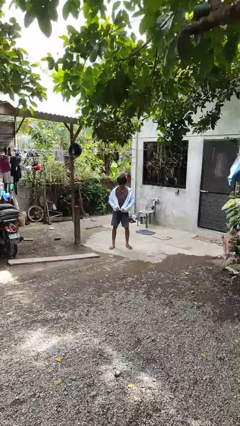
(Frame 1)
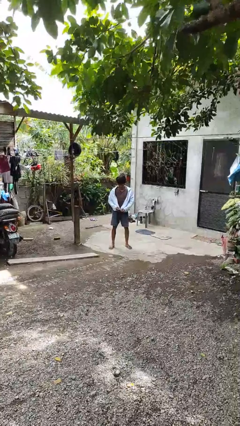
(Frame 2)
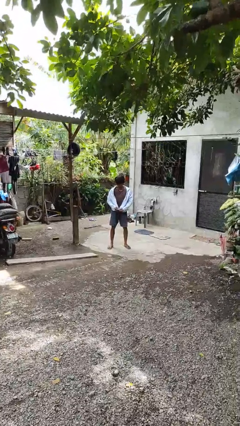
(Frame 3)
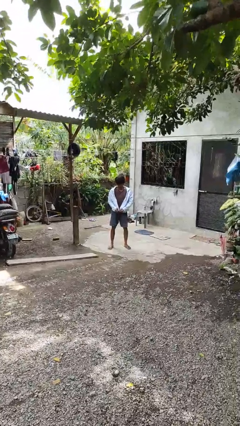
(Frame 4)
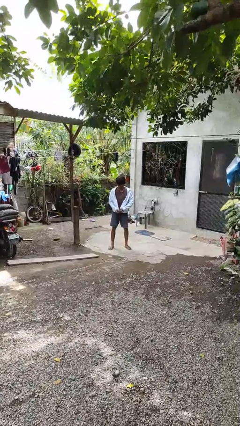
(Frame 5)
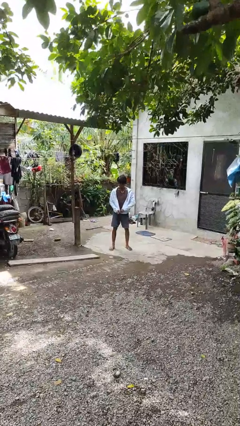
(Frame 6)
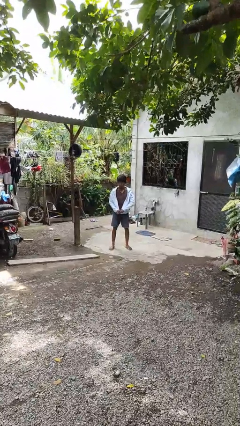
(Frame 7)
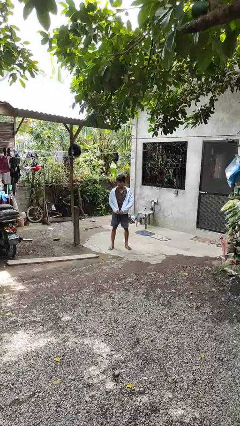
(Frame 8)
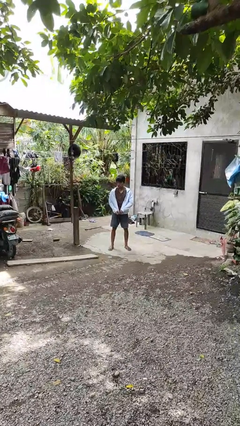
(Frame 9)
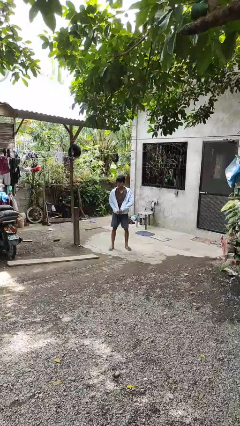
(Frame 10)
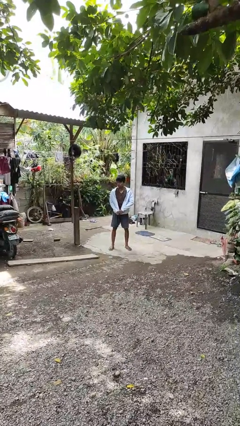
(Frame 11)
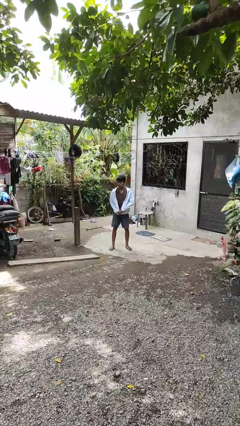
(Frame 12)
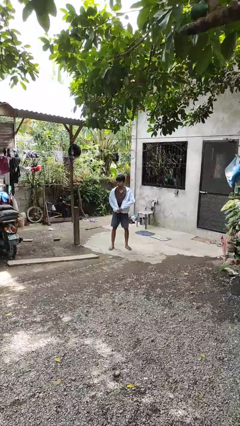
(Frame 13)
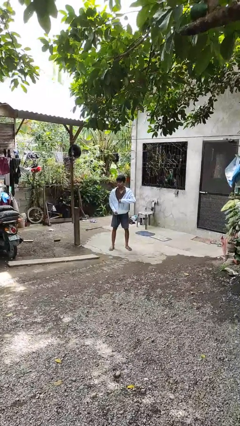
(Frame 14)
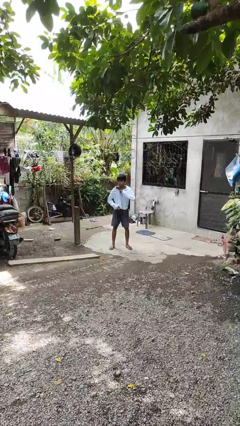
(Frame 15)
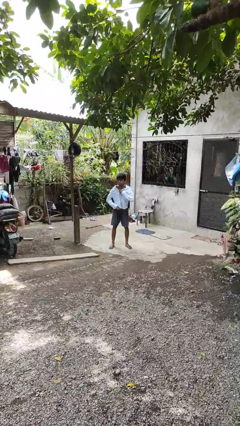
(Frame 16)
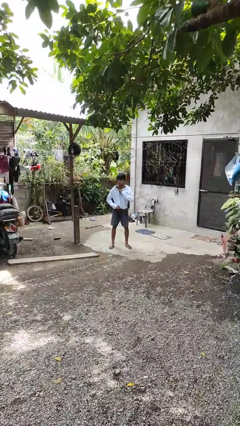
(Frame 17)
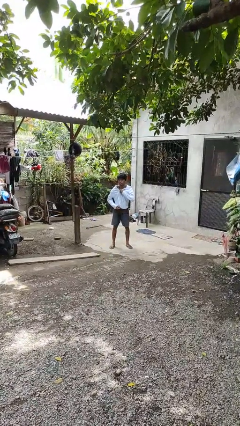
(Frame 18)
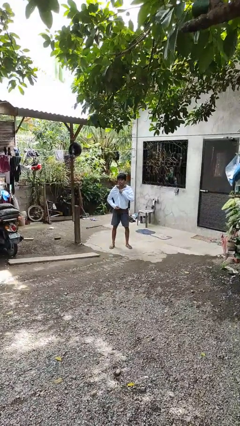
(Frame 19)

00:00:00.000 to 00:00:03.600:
person zips up jacket

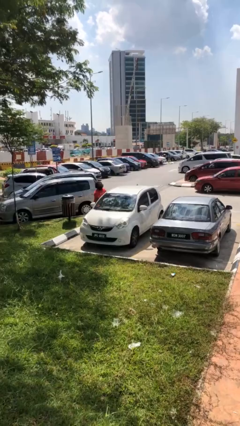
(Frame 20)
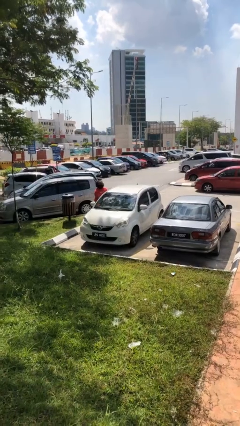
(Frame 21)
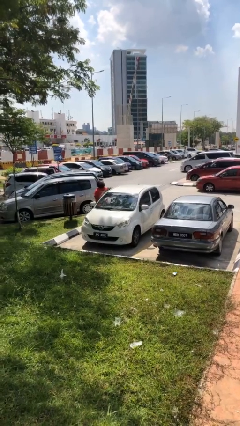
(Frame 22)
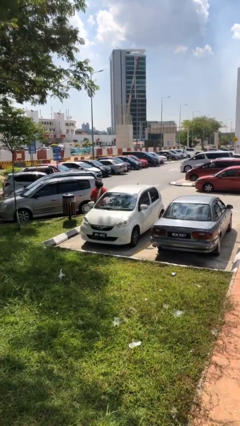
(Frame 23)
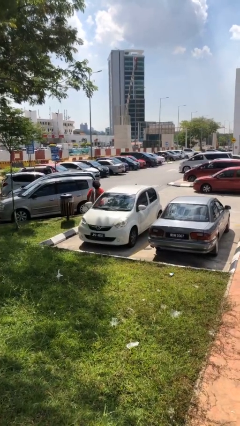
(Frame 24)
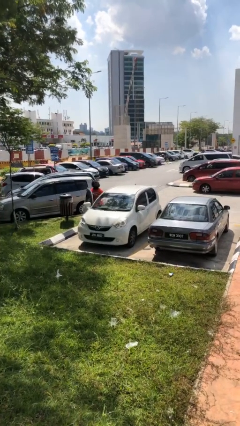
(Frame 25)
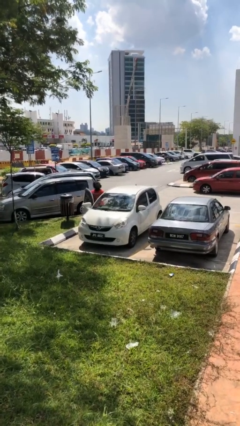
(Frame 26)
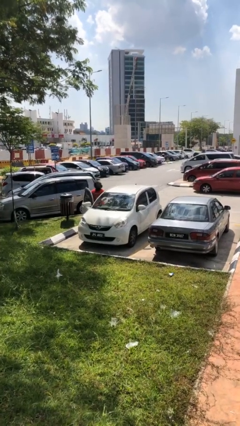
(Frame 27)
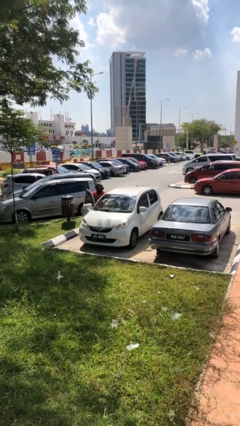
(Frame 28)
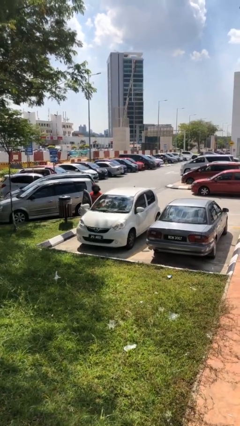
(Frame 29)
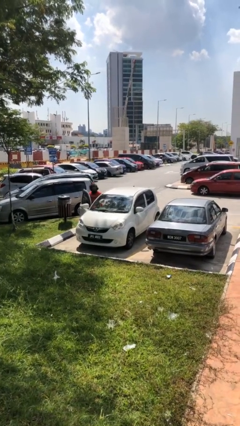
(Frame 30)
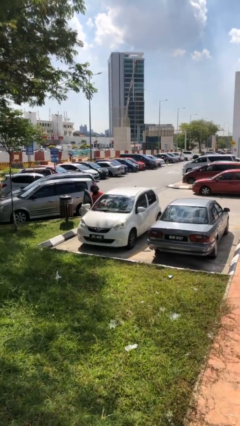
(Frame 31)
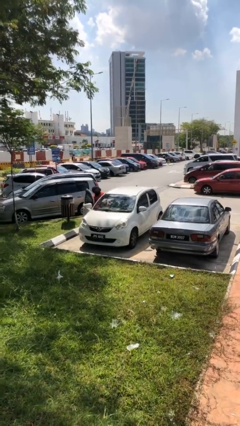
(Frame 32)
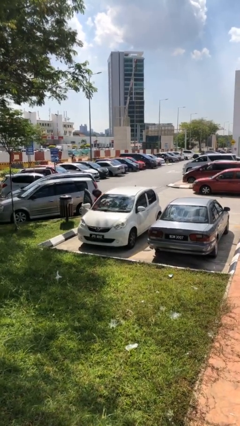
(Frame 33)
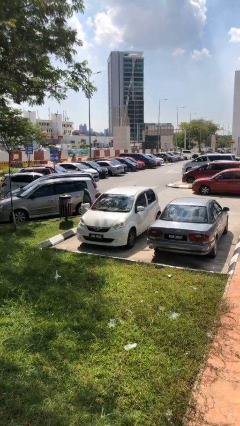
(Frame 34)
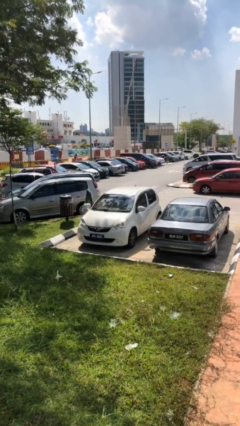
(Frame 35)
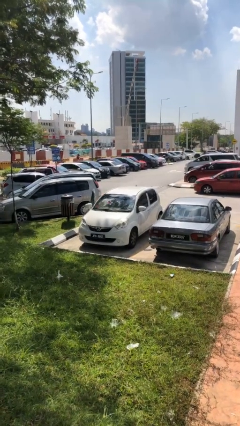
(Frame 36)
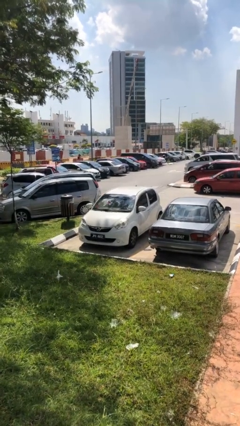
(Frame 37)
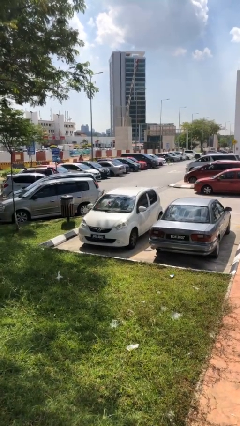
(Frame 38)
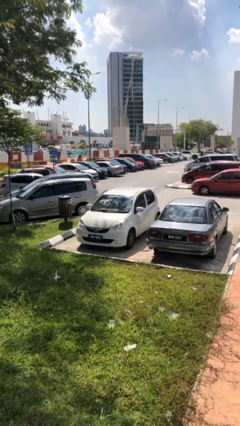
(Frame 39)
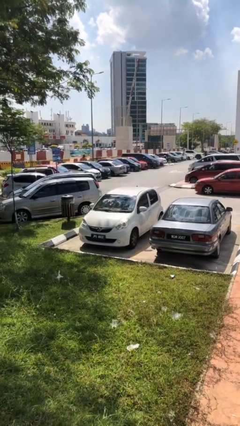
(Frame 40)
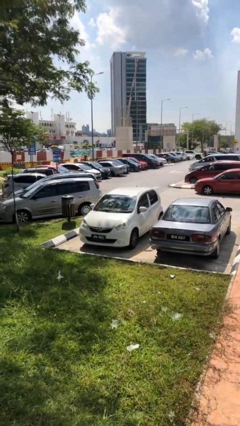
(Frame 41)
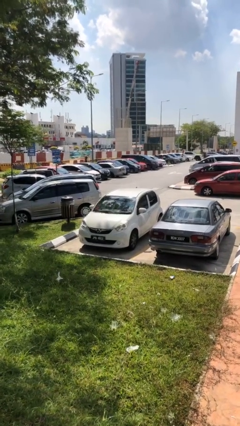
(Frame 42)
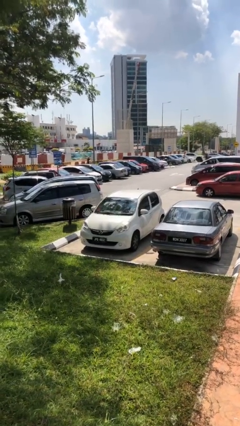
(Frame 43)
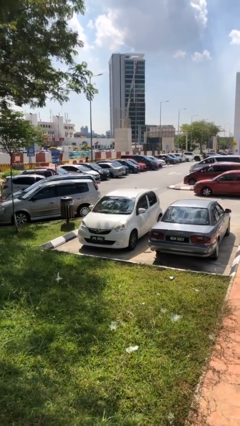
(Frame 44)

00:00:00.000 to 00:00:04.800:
car picks up person

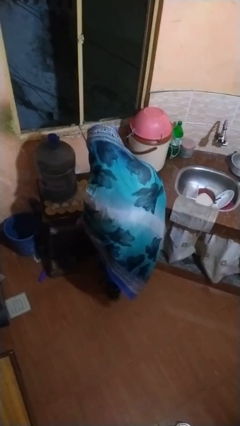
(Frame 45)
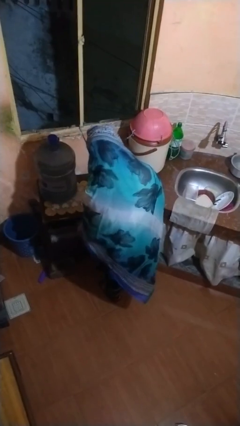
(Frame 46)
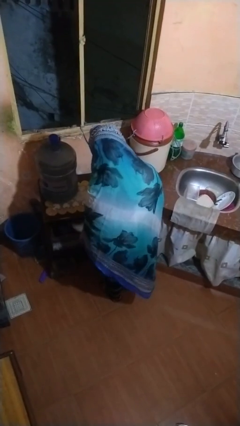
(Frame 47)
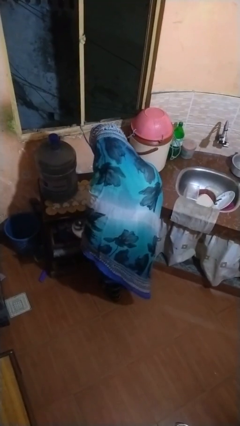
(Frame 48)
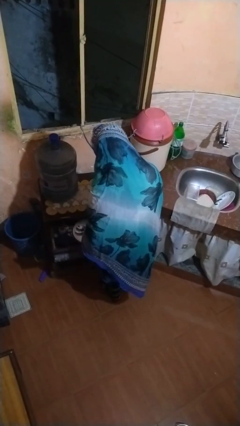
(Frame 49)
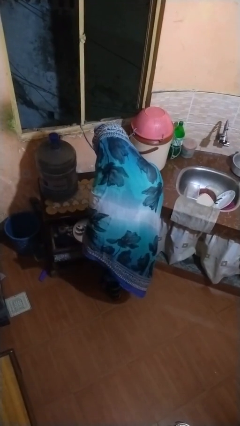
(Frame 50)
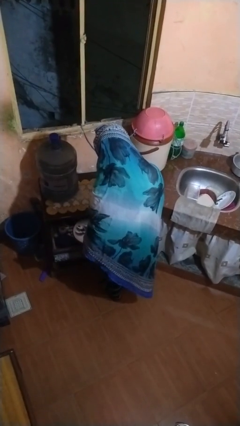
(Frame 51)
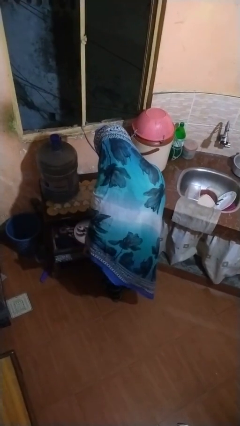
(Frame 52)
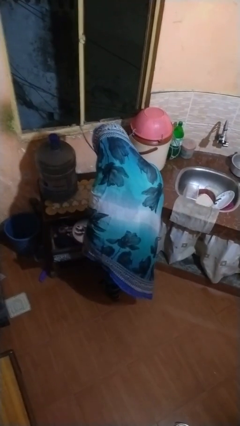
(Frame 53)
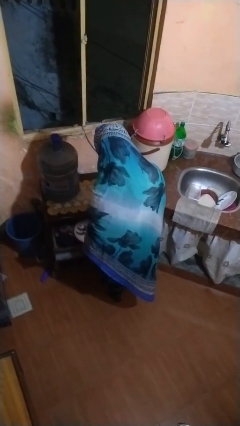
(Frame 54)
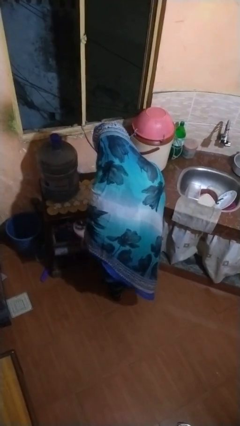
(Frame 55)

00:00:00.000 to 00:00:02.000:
person opens kitchen drawer

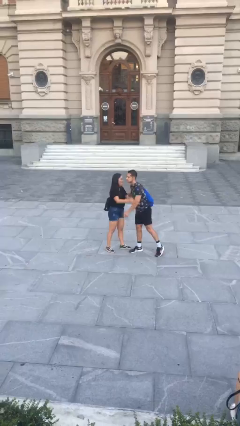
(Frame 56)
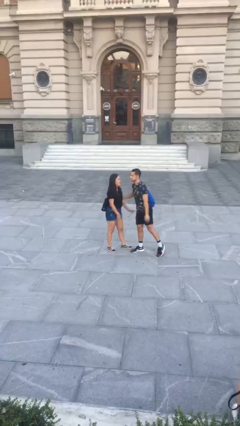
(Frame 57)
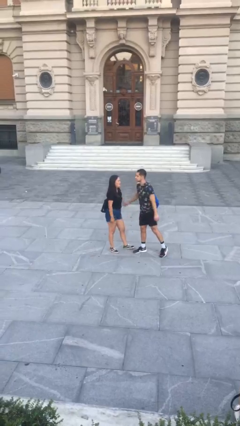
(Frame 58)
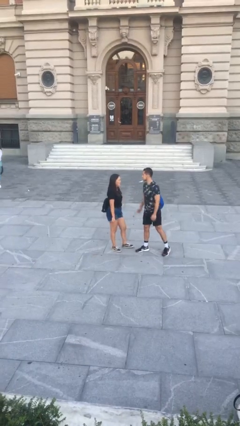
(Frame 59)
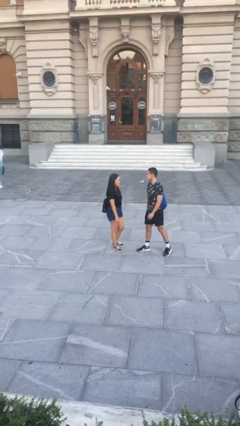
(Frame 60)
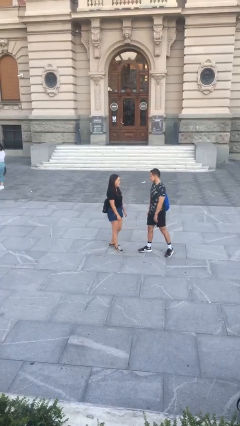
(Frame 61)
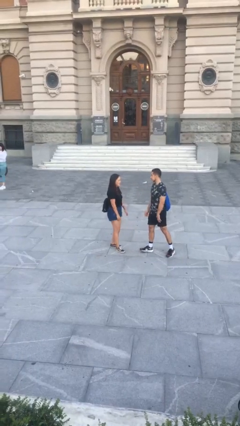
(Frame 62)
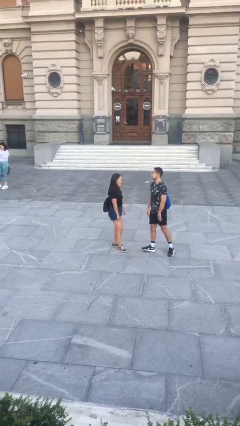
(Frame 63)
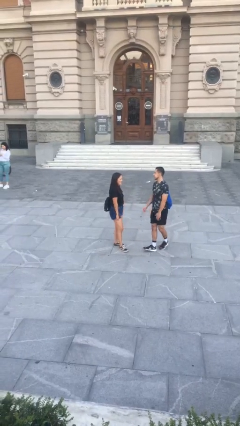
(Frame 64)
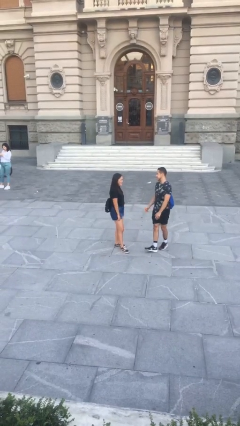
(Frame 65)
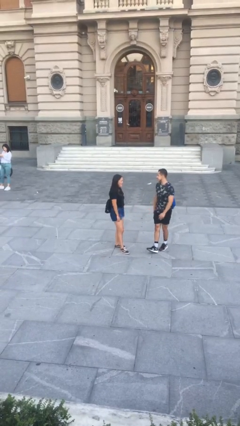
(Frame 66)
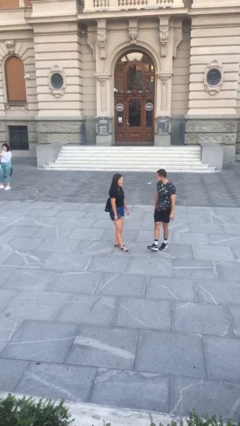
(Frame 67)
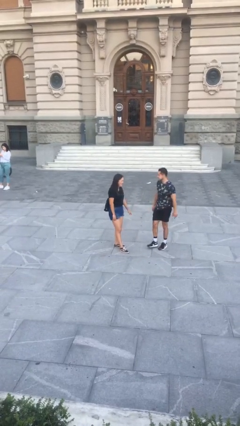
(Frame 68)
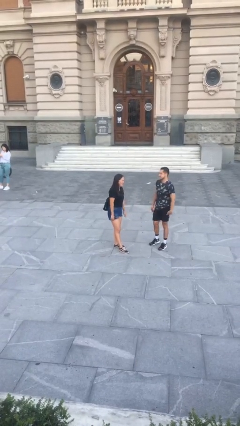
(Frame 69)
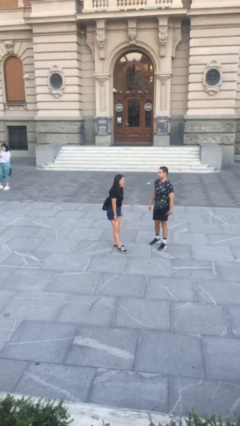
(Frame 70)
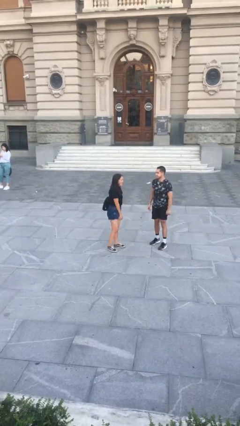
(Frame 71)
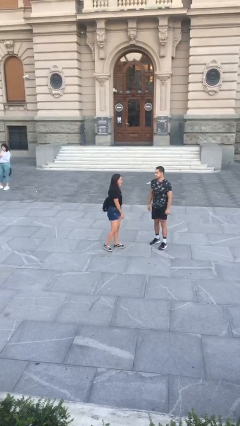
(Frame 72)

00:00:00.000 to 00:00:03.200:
person talks to person

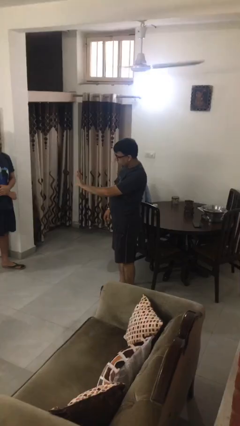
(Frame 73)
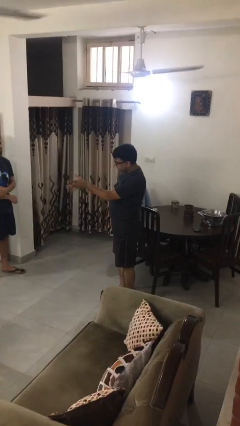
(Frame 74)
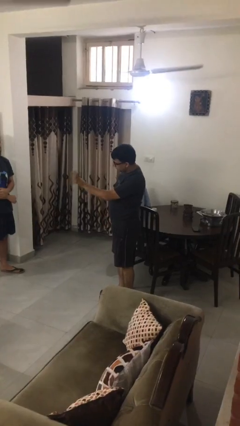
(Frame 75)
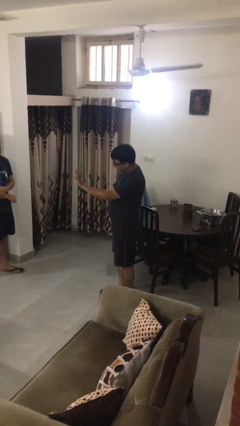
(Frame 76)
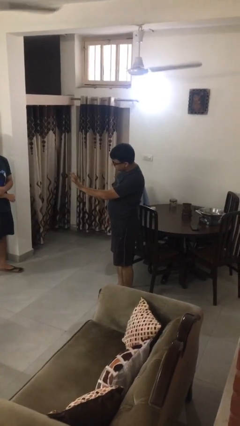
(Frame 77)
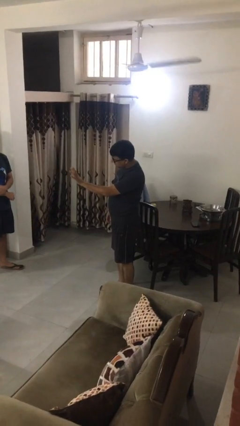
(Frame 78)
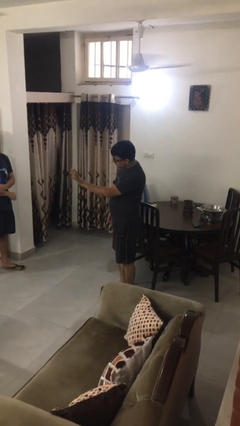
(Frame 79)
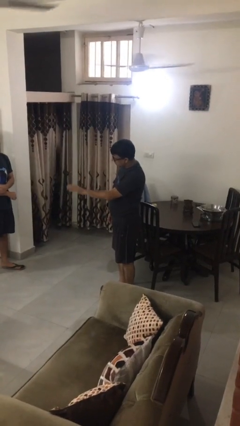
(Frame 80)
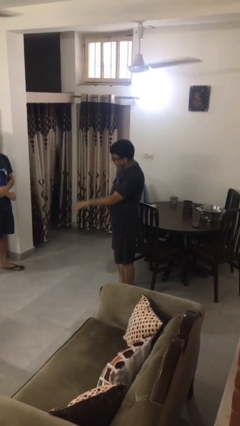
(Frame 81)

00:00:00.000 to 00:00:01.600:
person waves at person

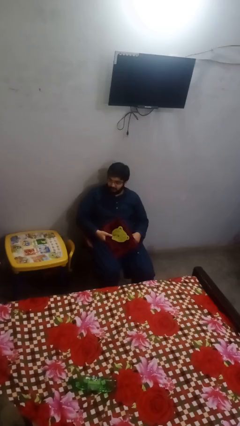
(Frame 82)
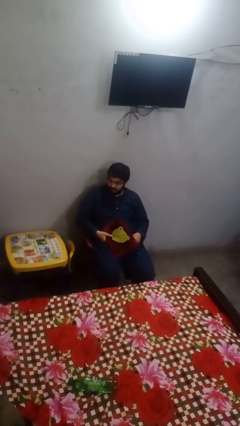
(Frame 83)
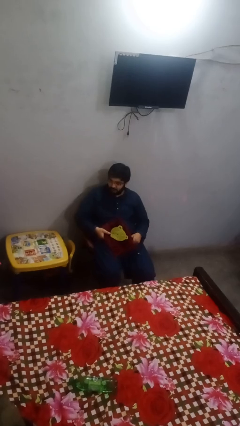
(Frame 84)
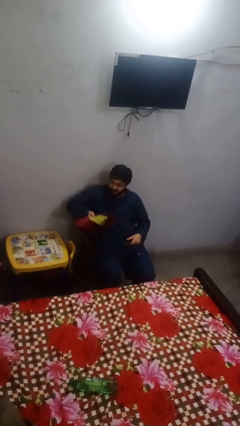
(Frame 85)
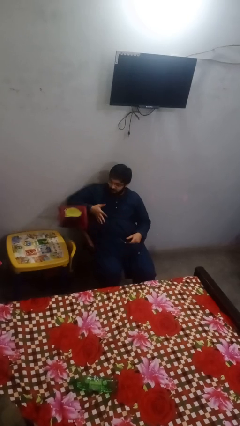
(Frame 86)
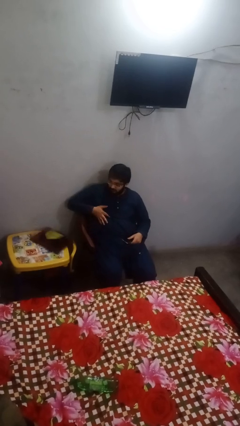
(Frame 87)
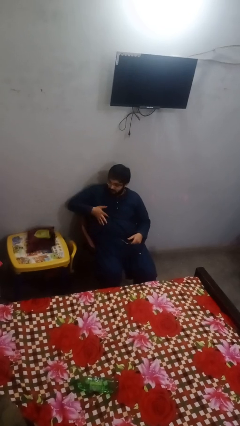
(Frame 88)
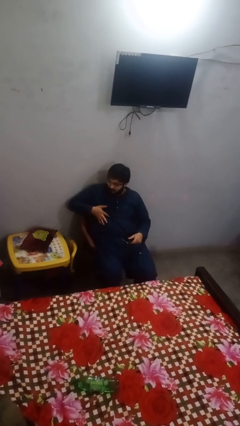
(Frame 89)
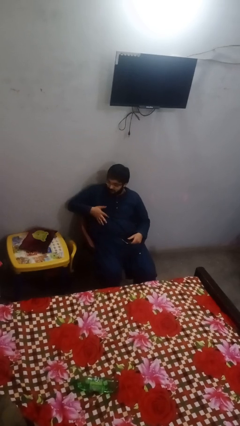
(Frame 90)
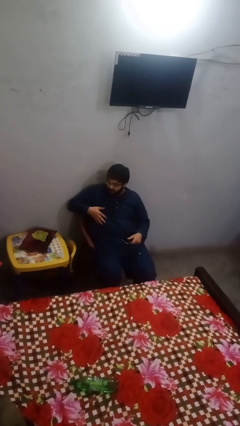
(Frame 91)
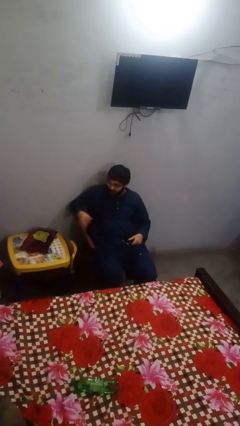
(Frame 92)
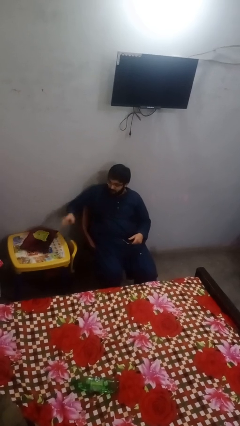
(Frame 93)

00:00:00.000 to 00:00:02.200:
person throws object on table
